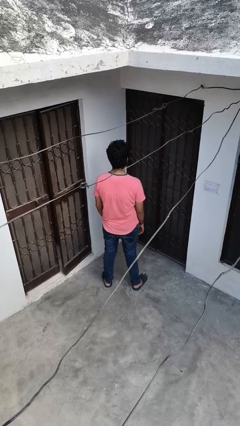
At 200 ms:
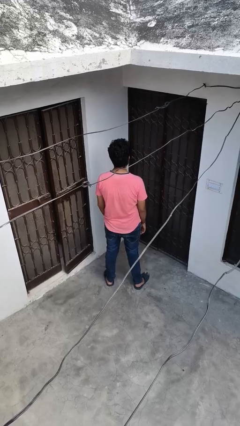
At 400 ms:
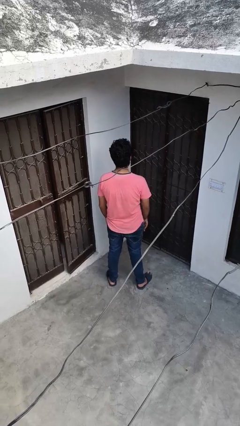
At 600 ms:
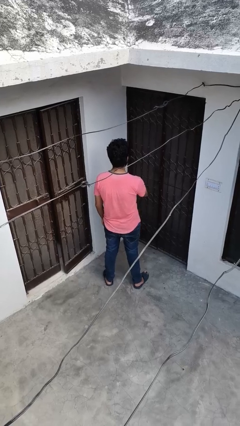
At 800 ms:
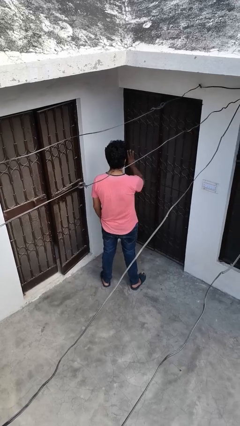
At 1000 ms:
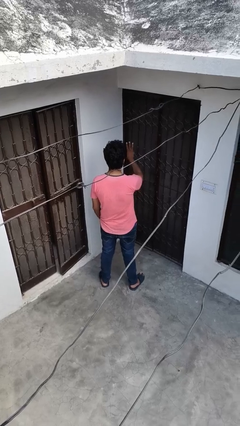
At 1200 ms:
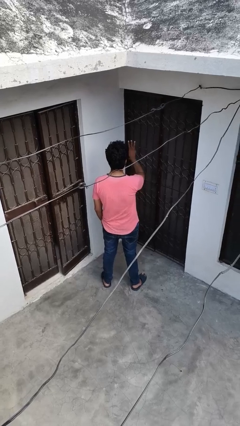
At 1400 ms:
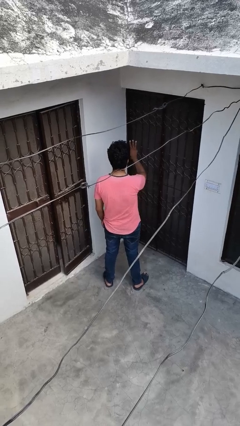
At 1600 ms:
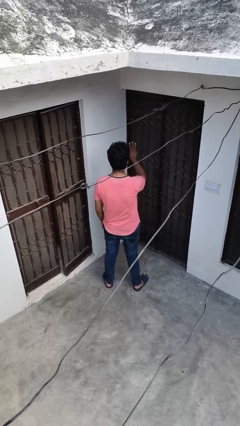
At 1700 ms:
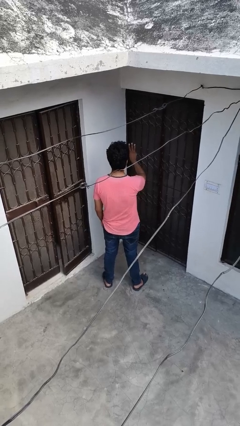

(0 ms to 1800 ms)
person gestures number three

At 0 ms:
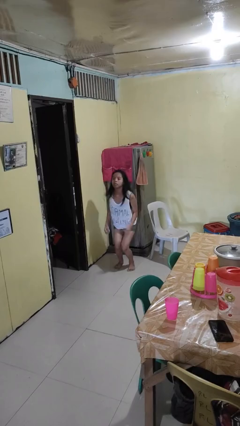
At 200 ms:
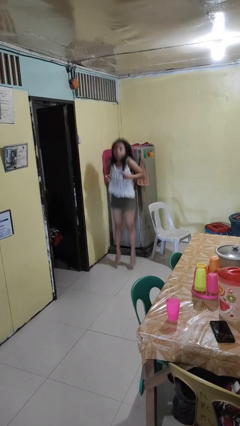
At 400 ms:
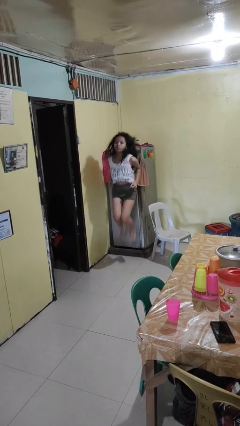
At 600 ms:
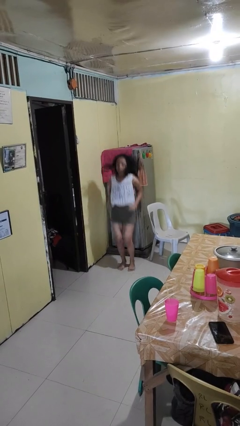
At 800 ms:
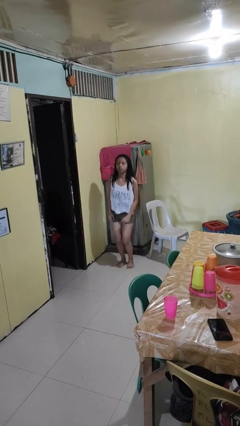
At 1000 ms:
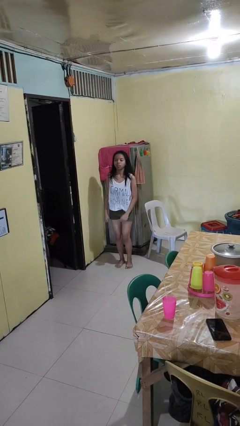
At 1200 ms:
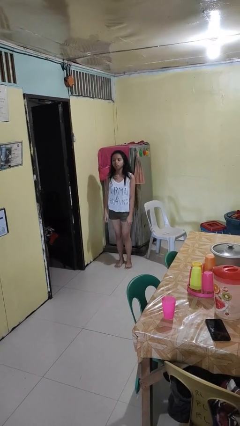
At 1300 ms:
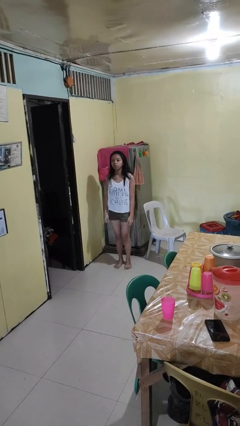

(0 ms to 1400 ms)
person jumps

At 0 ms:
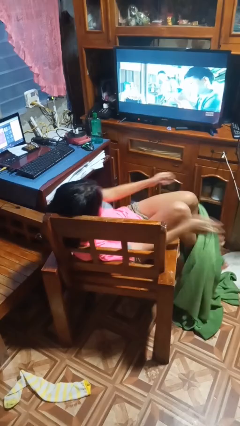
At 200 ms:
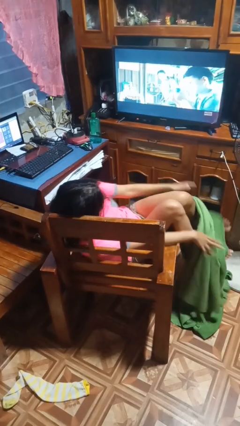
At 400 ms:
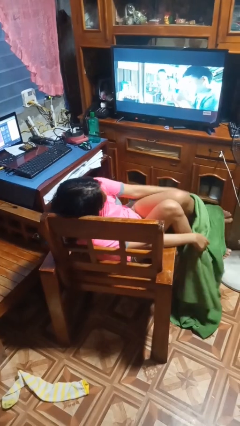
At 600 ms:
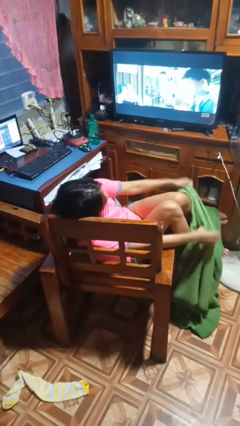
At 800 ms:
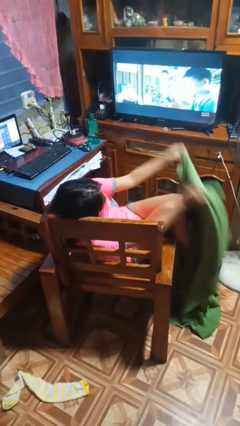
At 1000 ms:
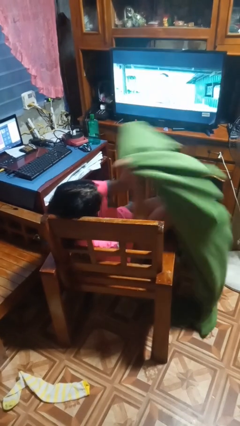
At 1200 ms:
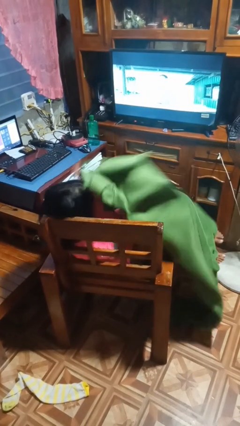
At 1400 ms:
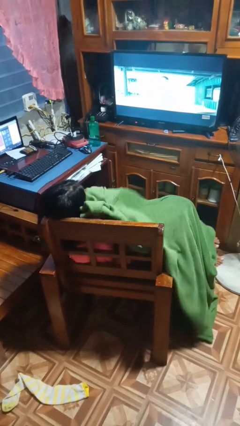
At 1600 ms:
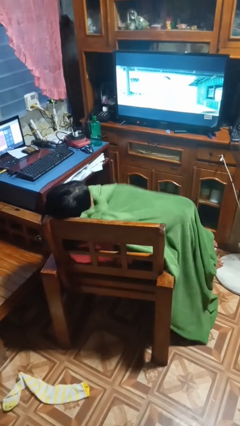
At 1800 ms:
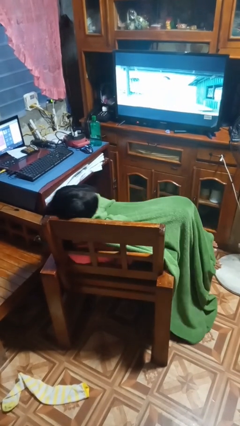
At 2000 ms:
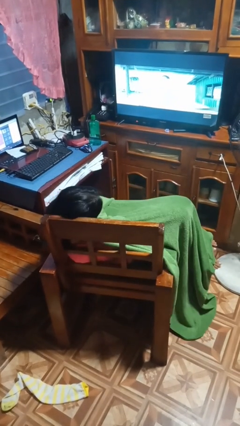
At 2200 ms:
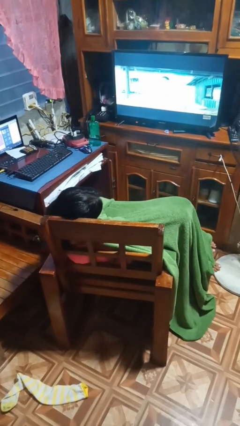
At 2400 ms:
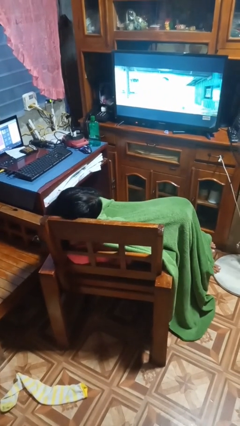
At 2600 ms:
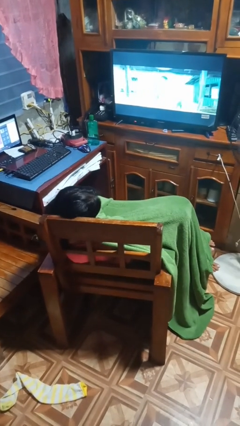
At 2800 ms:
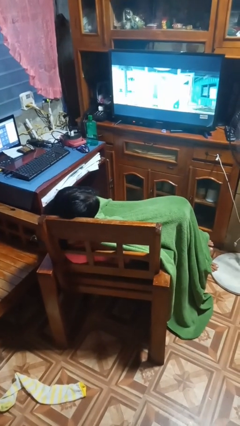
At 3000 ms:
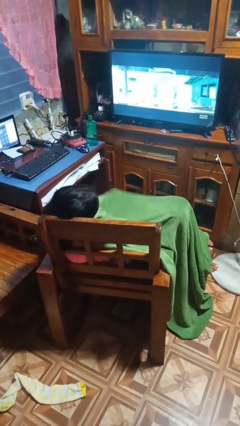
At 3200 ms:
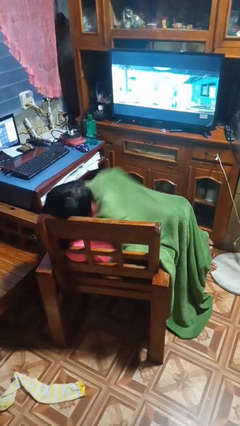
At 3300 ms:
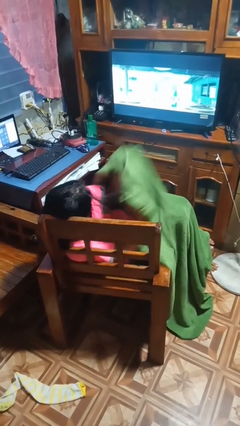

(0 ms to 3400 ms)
person covers with blanket

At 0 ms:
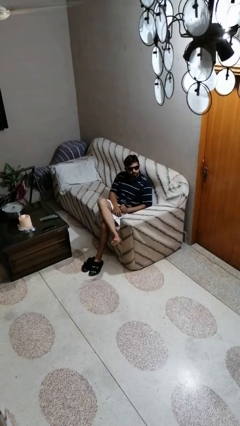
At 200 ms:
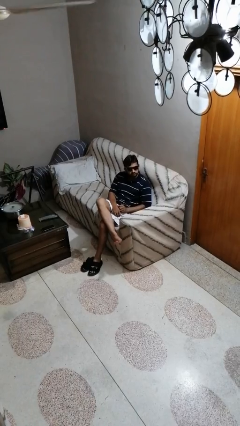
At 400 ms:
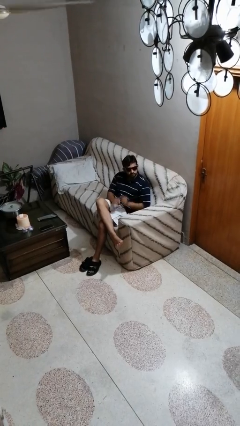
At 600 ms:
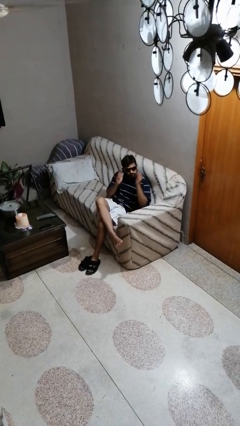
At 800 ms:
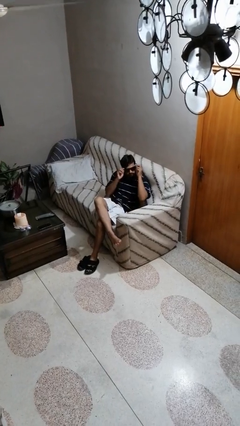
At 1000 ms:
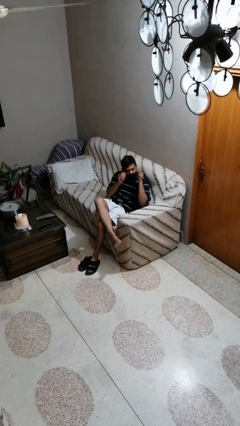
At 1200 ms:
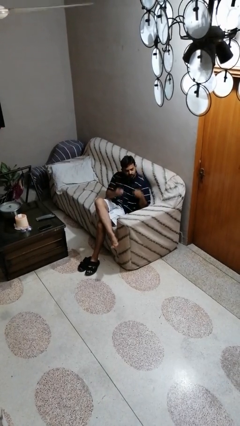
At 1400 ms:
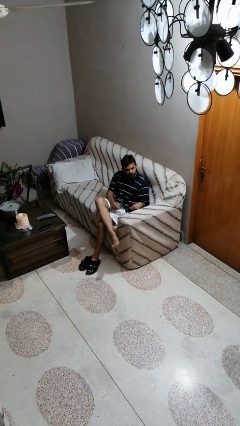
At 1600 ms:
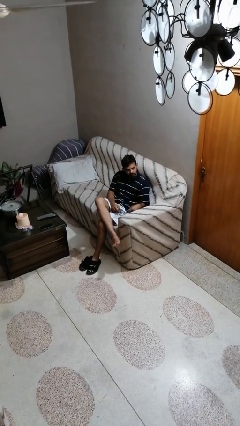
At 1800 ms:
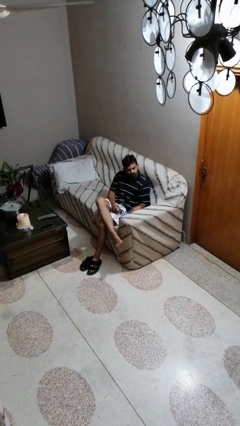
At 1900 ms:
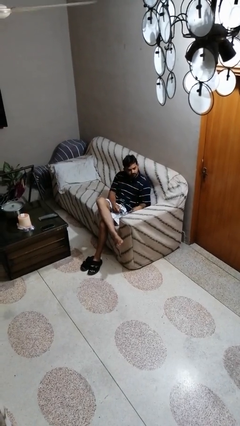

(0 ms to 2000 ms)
person takes off sunglasses

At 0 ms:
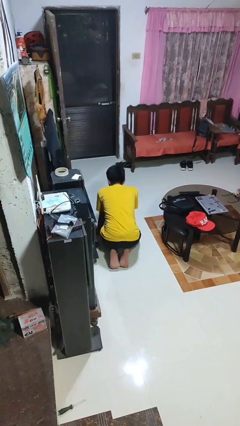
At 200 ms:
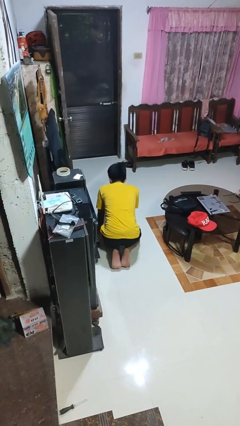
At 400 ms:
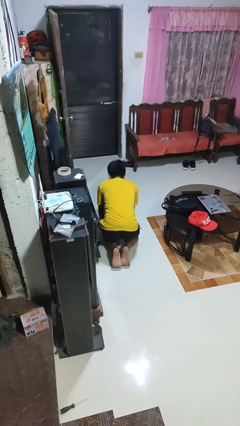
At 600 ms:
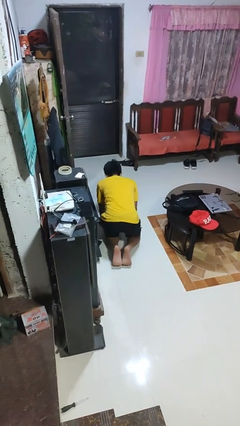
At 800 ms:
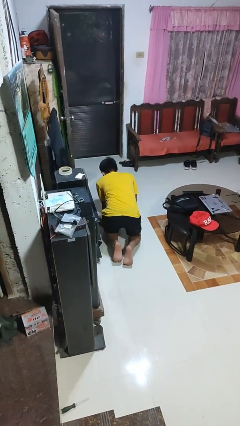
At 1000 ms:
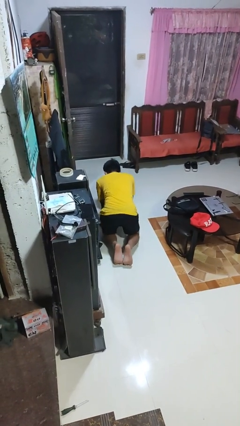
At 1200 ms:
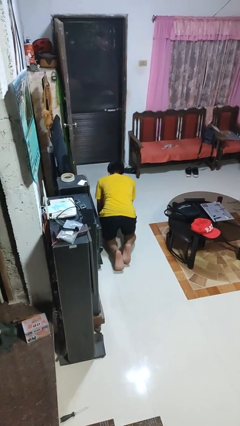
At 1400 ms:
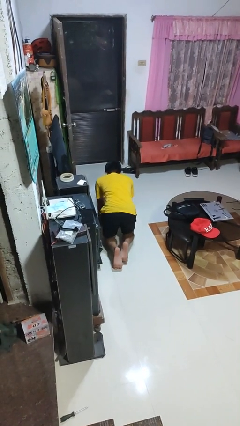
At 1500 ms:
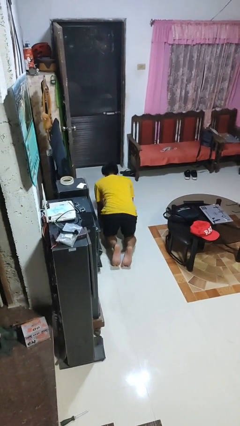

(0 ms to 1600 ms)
person crawls

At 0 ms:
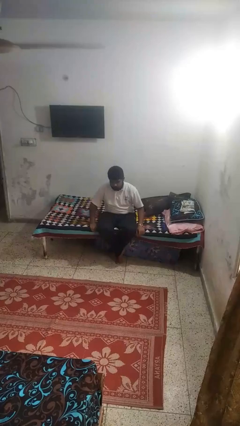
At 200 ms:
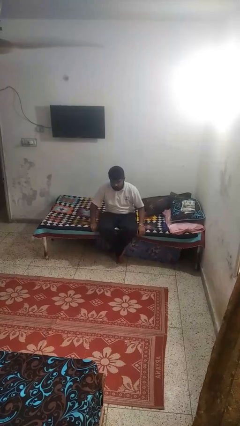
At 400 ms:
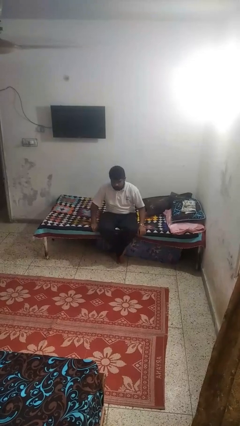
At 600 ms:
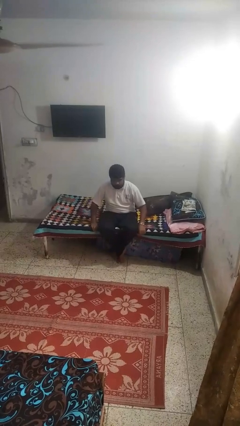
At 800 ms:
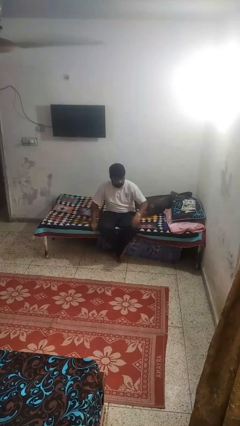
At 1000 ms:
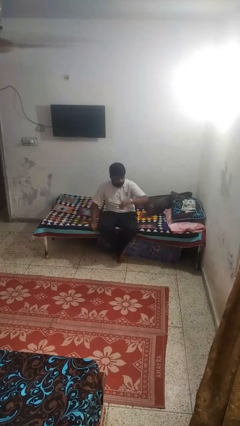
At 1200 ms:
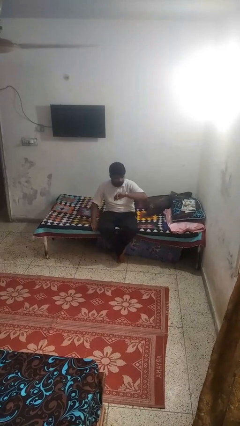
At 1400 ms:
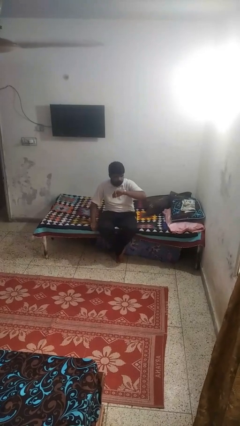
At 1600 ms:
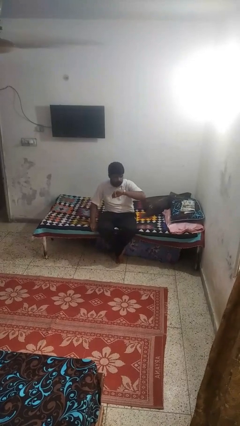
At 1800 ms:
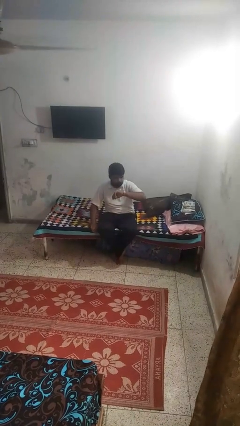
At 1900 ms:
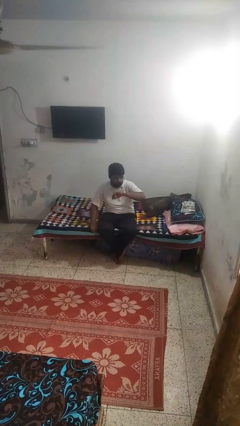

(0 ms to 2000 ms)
person looks at wristwatch

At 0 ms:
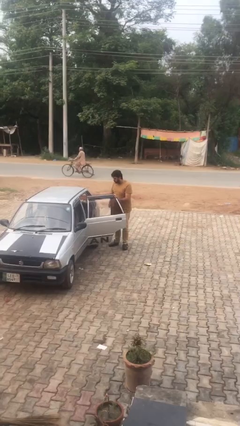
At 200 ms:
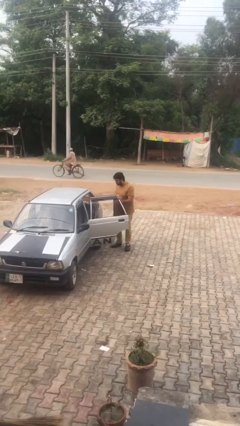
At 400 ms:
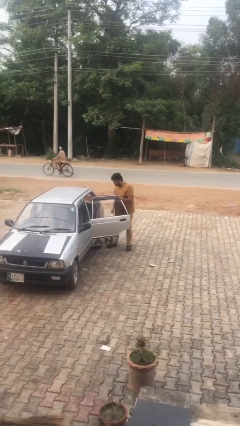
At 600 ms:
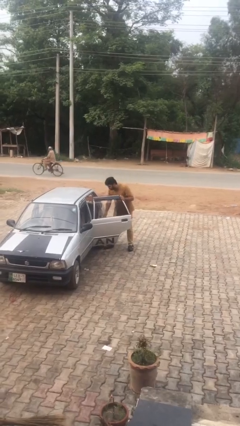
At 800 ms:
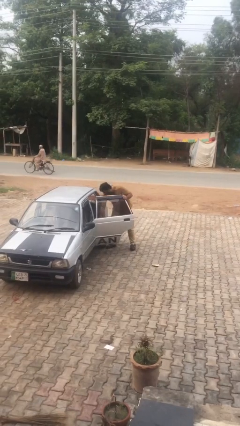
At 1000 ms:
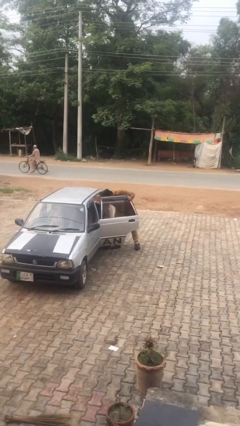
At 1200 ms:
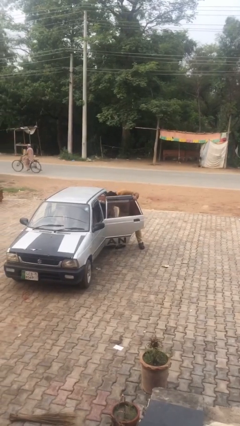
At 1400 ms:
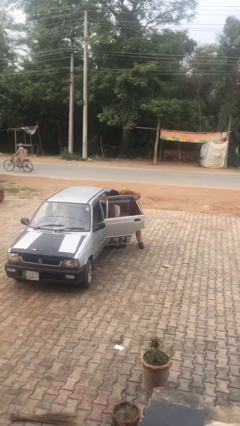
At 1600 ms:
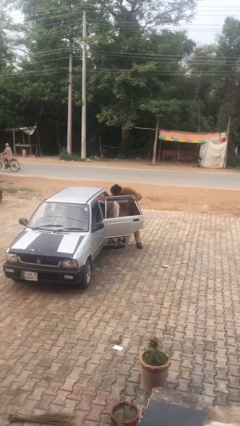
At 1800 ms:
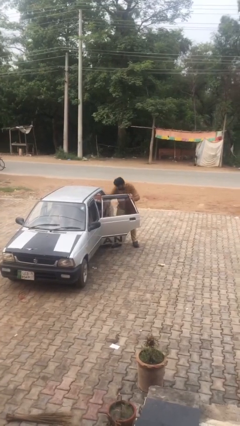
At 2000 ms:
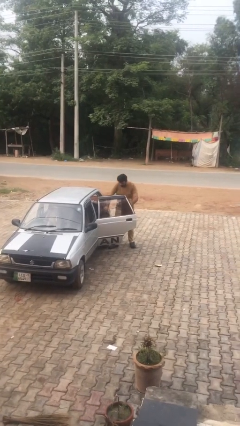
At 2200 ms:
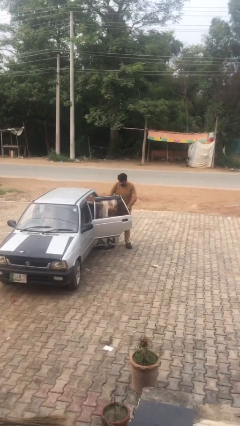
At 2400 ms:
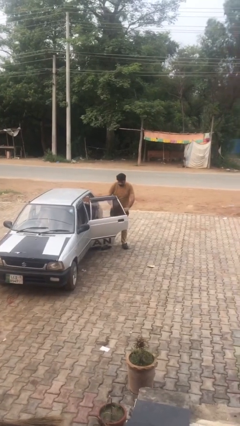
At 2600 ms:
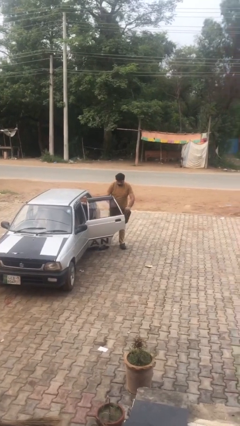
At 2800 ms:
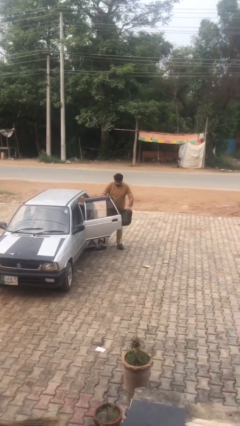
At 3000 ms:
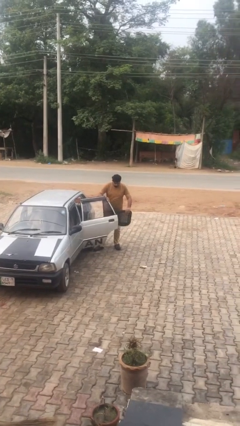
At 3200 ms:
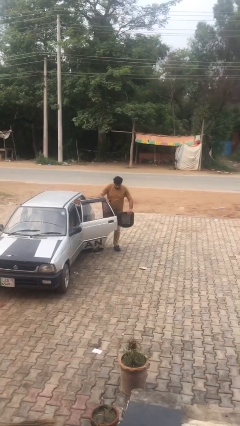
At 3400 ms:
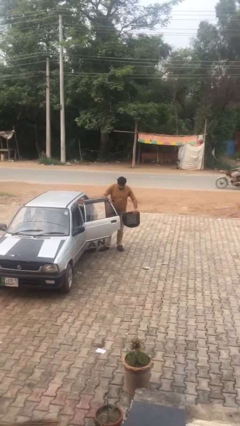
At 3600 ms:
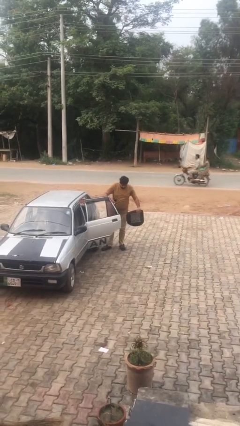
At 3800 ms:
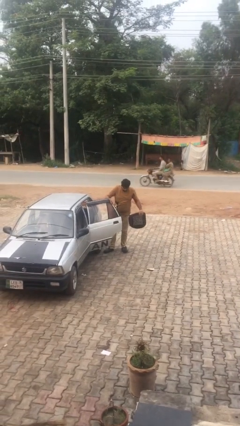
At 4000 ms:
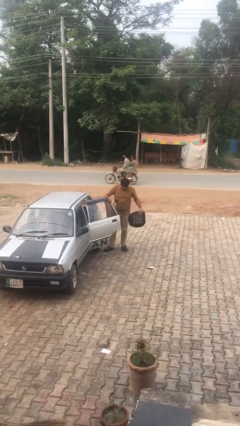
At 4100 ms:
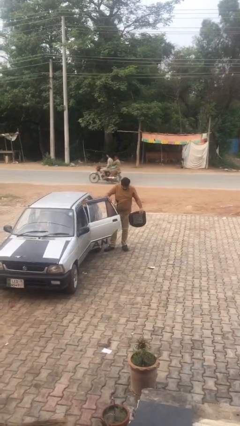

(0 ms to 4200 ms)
person unloads car

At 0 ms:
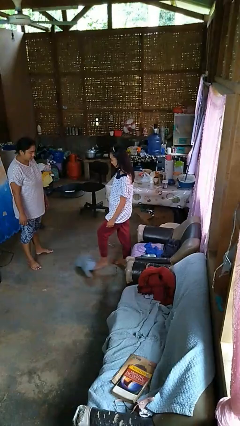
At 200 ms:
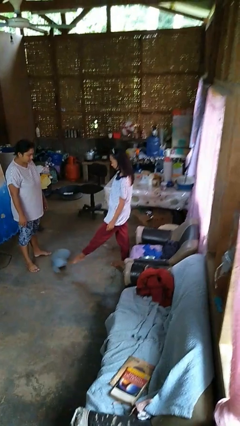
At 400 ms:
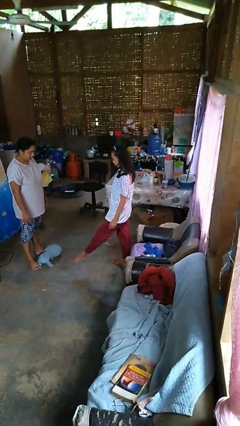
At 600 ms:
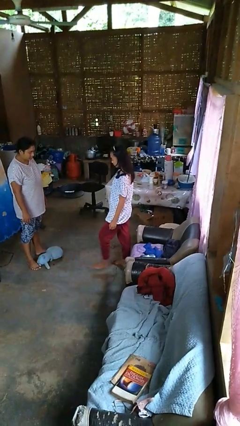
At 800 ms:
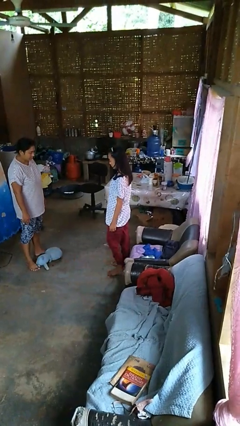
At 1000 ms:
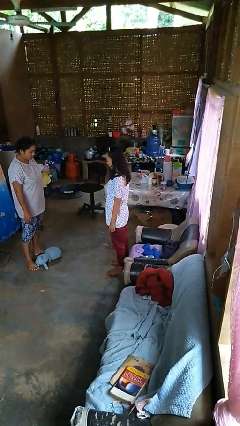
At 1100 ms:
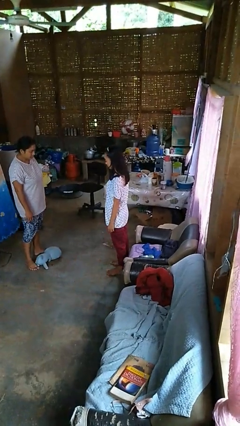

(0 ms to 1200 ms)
person kicks object to person
